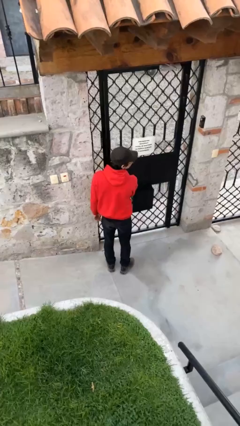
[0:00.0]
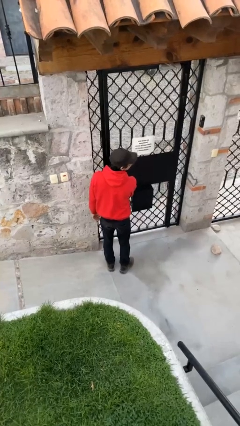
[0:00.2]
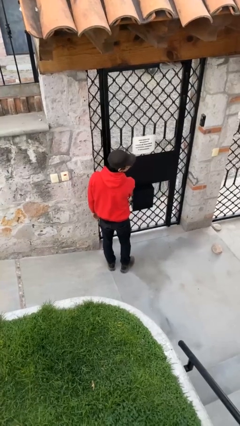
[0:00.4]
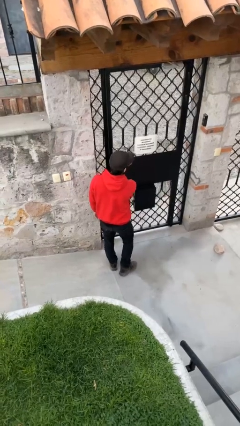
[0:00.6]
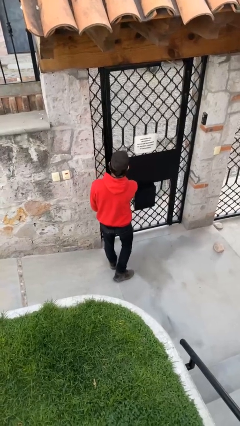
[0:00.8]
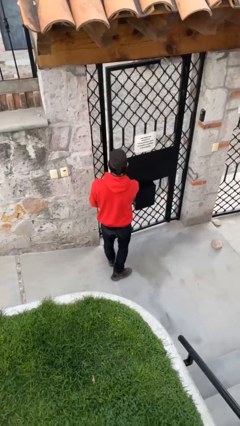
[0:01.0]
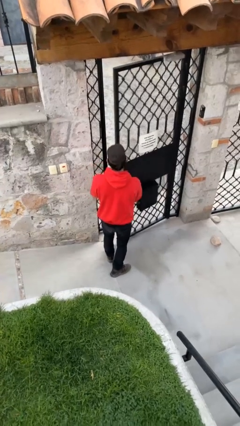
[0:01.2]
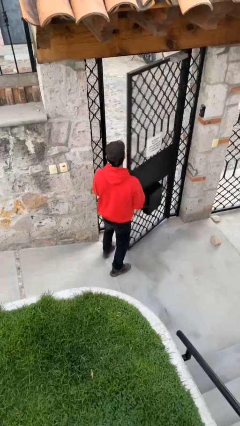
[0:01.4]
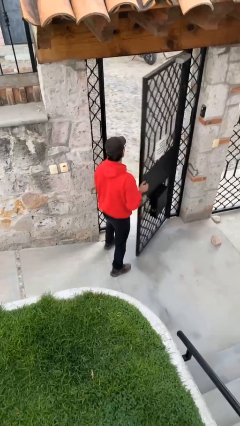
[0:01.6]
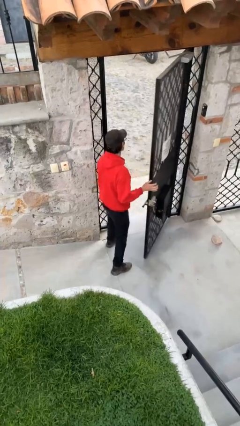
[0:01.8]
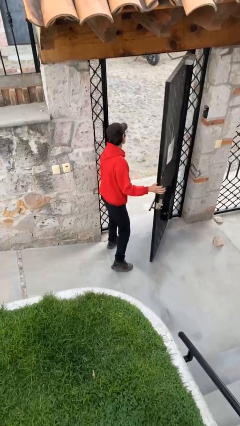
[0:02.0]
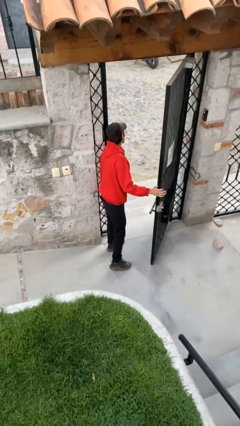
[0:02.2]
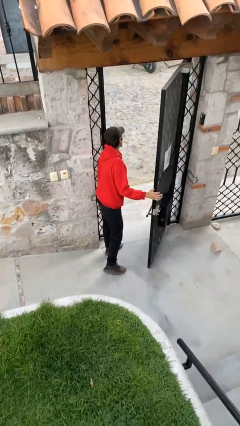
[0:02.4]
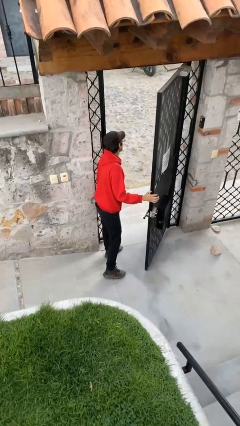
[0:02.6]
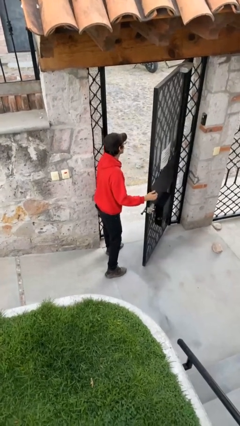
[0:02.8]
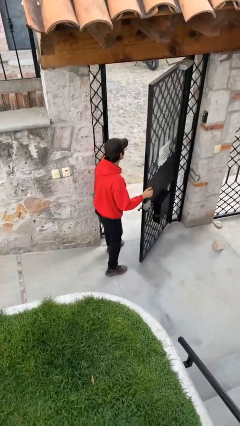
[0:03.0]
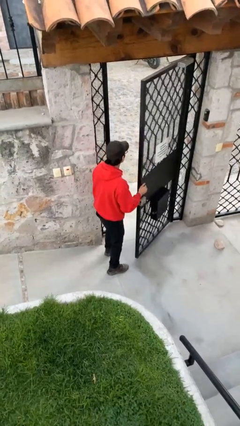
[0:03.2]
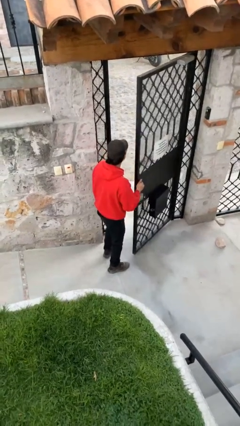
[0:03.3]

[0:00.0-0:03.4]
person opens facility door

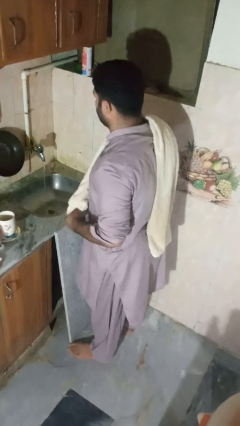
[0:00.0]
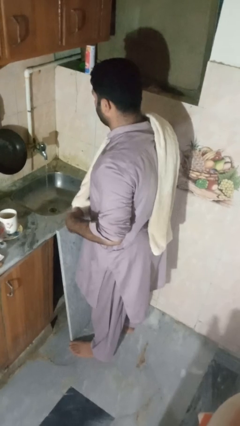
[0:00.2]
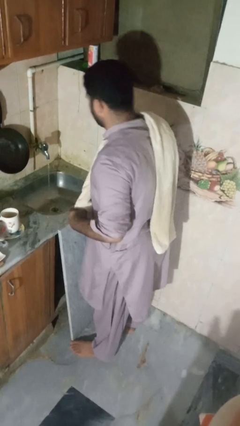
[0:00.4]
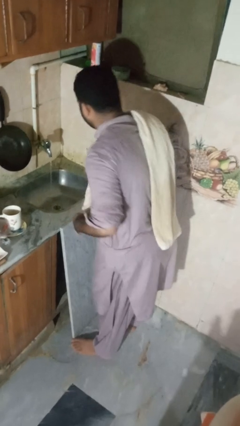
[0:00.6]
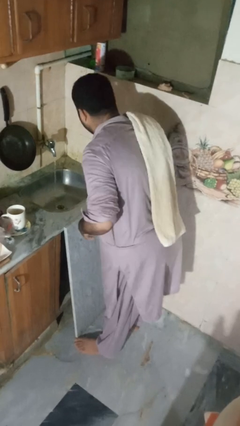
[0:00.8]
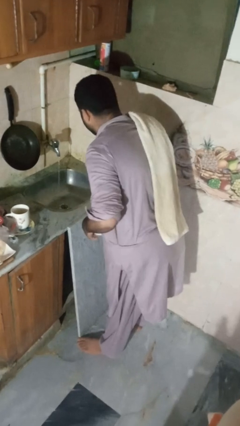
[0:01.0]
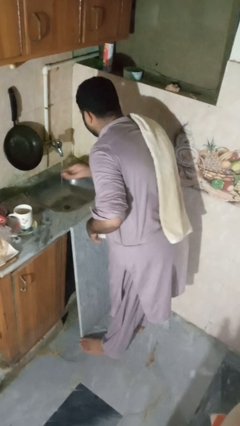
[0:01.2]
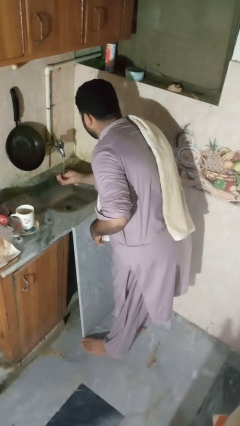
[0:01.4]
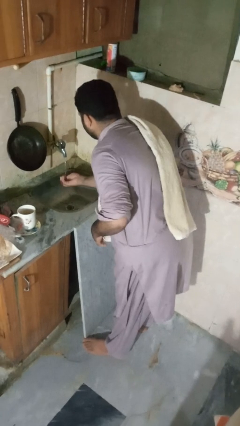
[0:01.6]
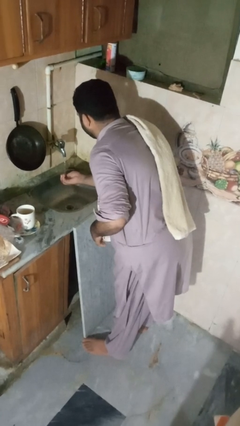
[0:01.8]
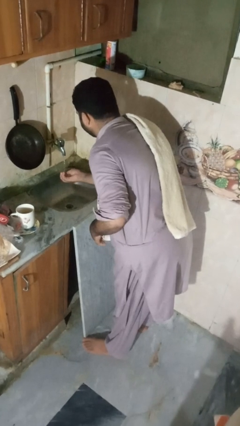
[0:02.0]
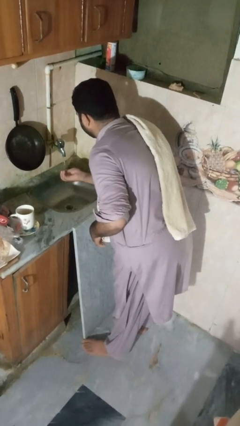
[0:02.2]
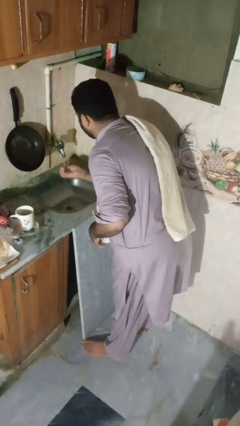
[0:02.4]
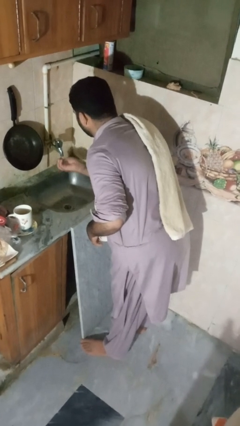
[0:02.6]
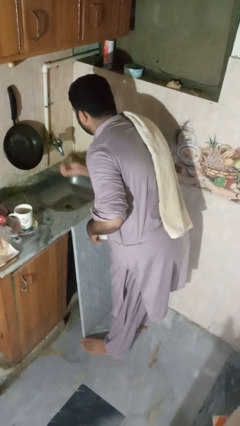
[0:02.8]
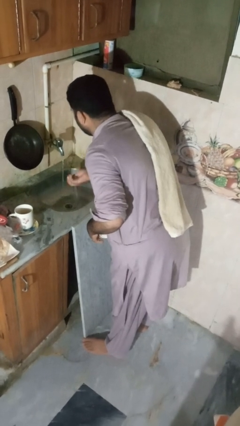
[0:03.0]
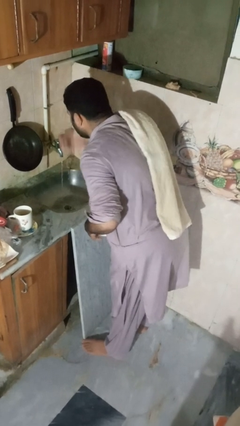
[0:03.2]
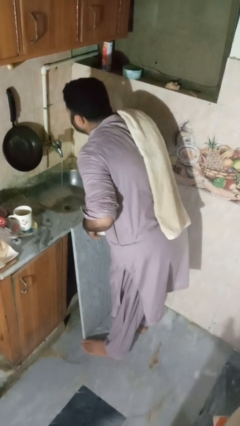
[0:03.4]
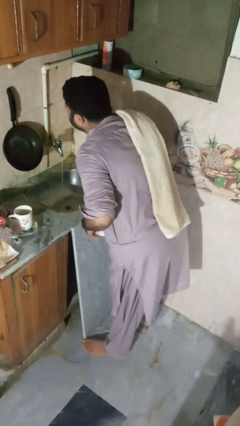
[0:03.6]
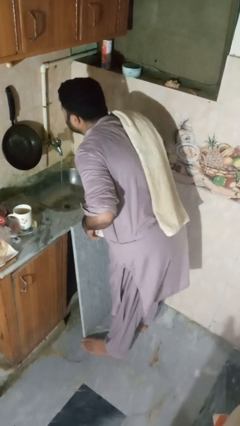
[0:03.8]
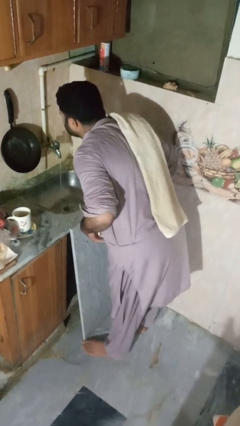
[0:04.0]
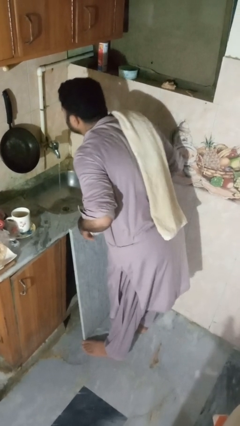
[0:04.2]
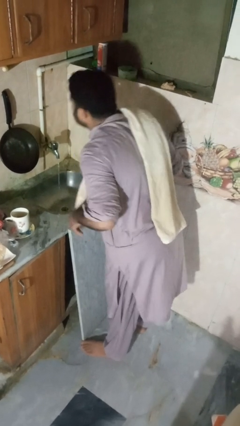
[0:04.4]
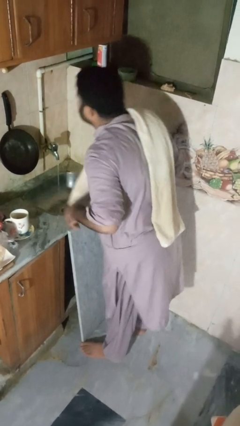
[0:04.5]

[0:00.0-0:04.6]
person washes face

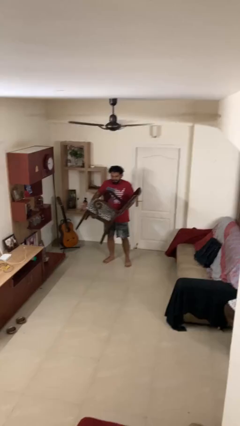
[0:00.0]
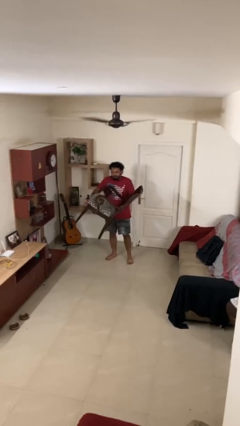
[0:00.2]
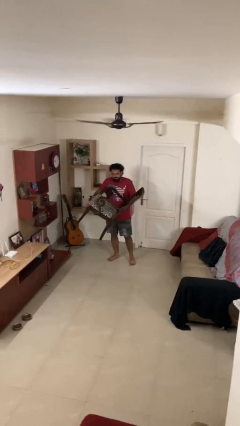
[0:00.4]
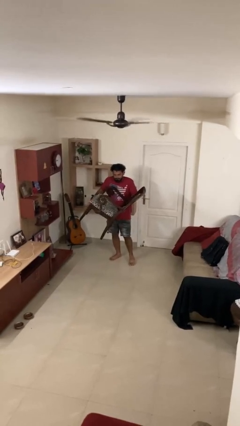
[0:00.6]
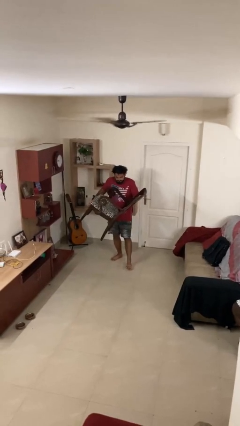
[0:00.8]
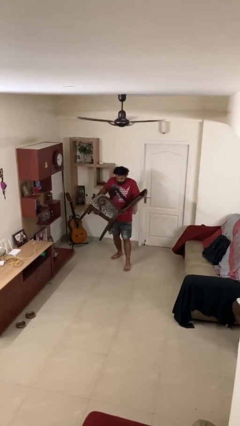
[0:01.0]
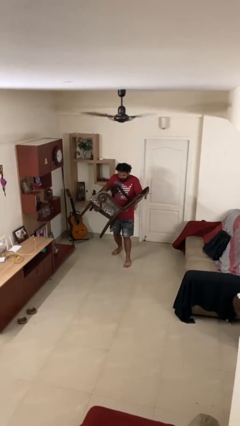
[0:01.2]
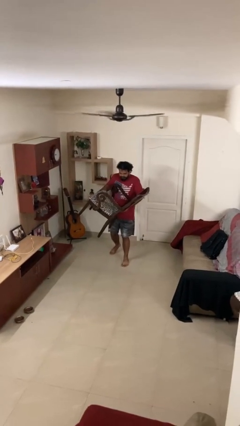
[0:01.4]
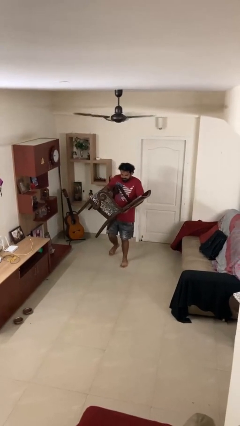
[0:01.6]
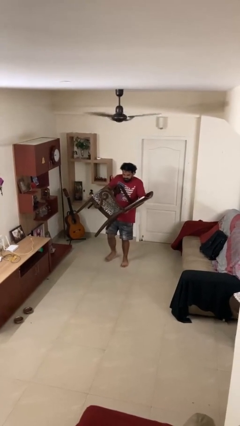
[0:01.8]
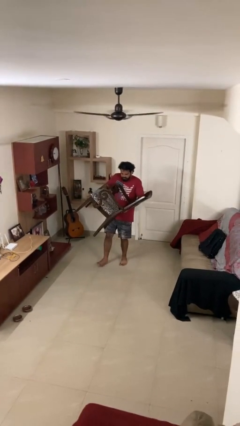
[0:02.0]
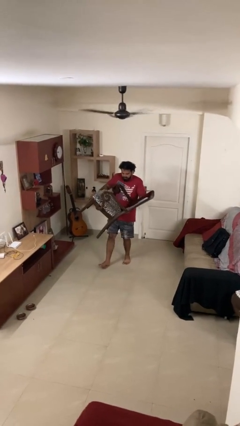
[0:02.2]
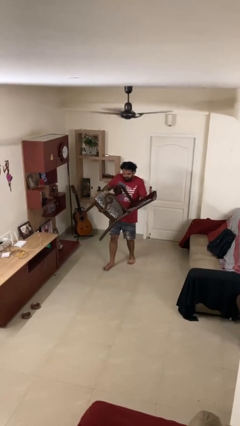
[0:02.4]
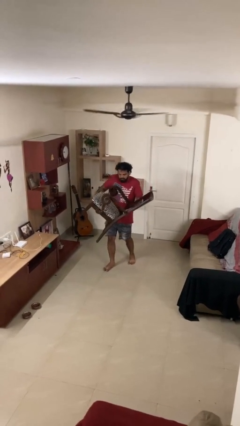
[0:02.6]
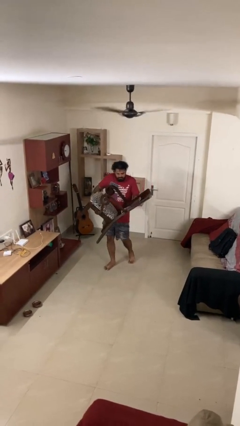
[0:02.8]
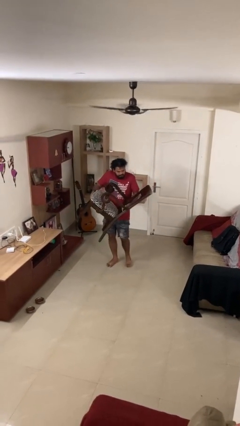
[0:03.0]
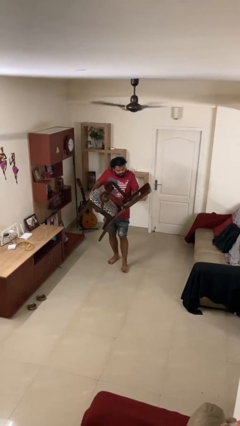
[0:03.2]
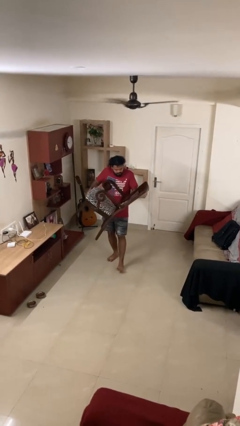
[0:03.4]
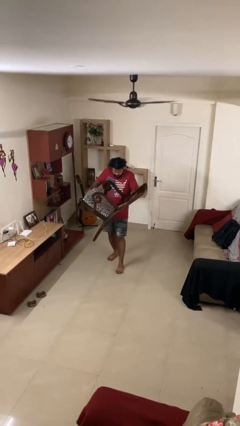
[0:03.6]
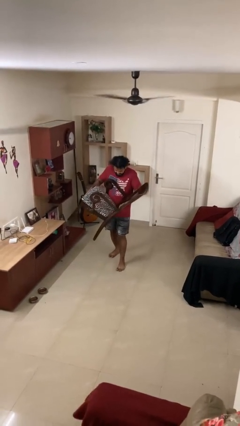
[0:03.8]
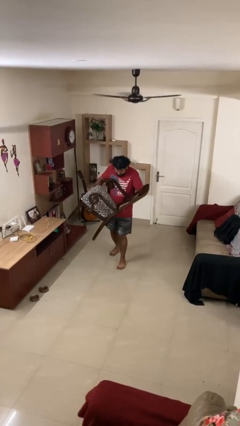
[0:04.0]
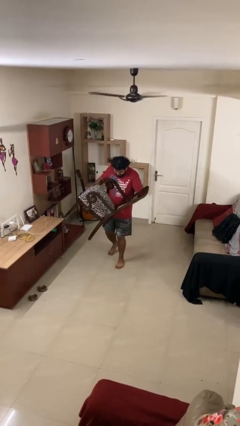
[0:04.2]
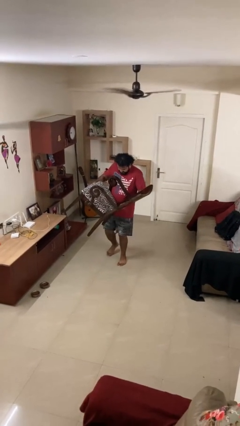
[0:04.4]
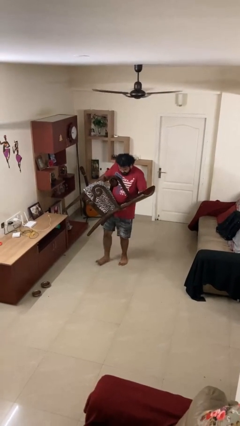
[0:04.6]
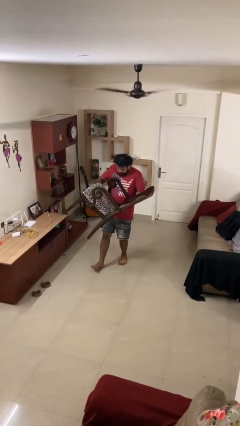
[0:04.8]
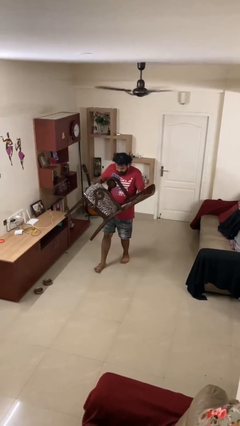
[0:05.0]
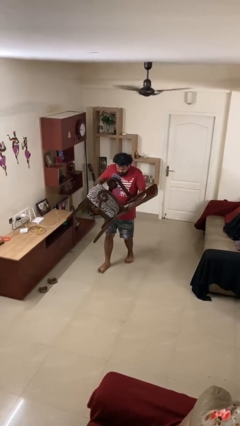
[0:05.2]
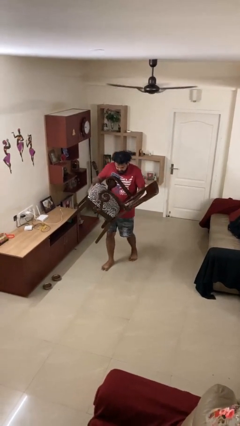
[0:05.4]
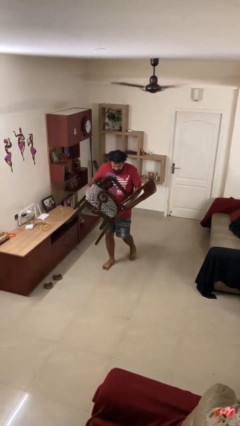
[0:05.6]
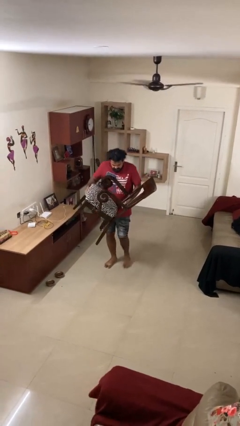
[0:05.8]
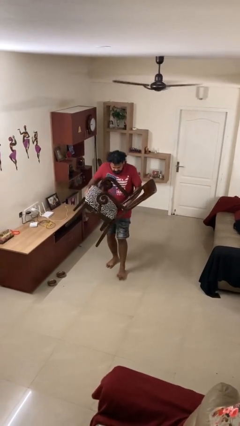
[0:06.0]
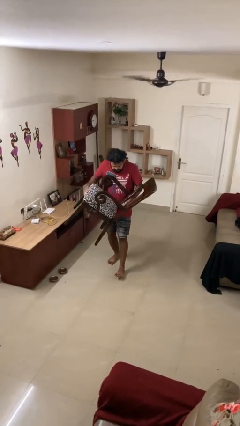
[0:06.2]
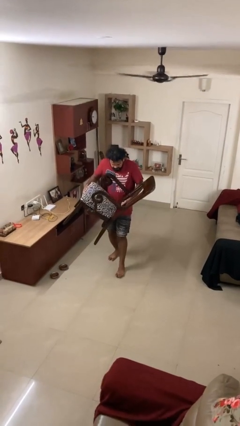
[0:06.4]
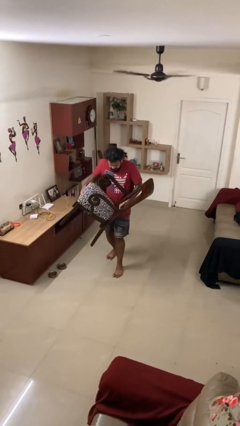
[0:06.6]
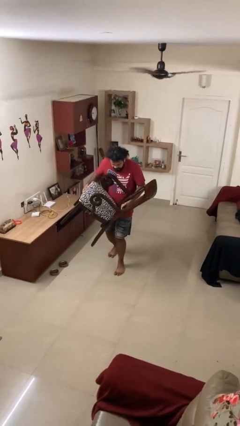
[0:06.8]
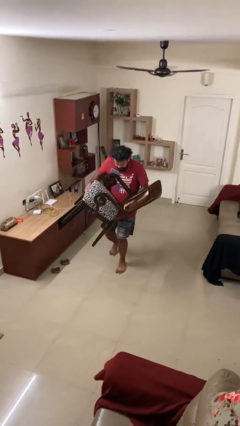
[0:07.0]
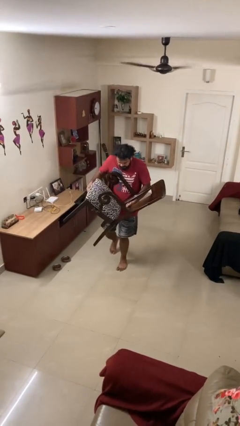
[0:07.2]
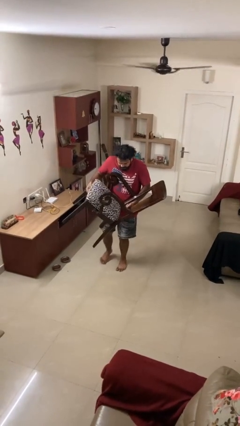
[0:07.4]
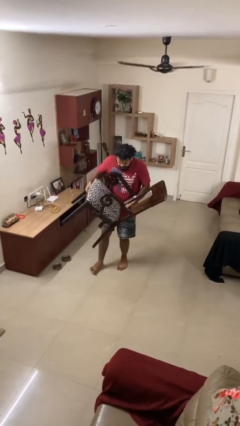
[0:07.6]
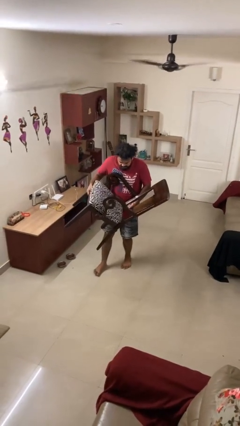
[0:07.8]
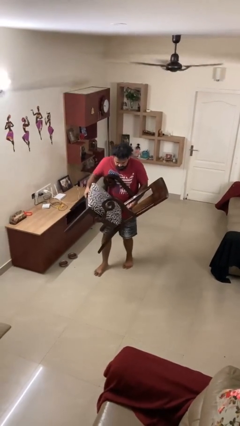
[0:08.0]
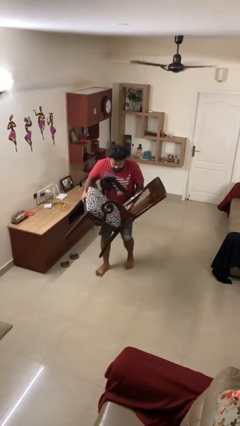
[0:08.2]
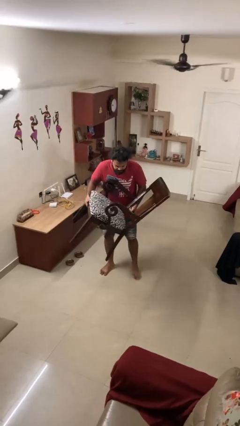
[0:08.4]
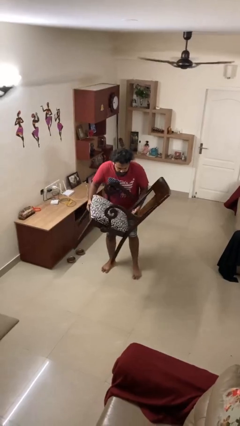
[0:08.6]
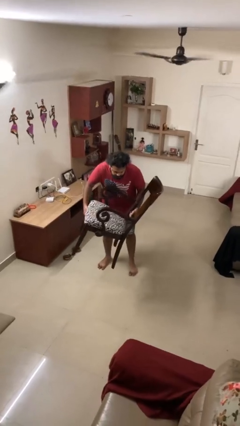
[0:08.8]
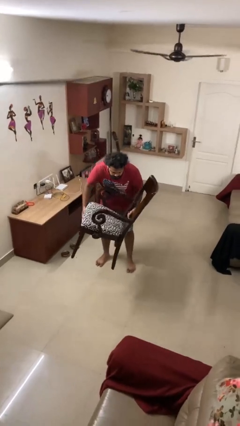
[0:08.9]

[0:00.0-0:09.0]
person carries heavy object

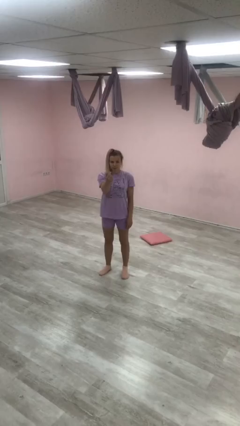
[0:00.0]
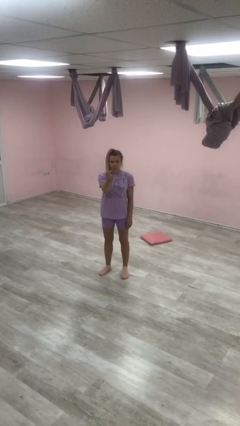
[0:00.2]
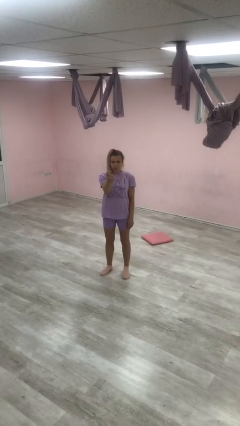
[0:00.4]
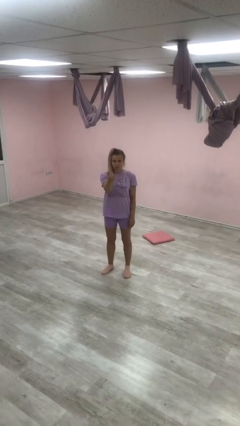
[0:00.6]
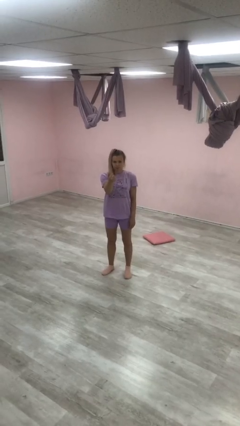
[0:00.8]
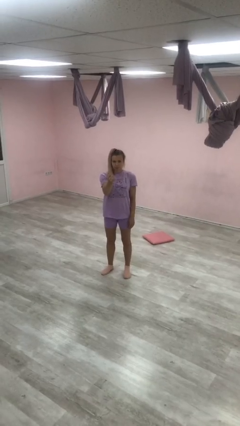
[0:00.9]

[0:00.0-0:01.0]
person gestures come here
